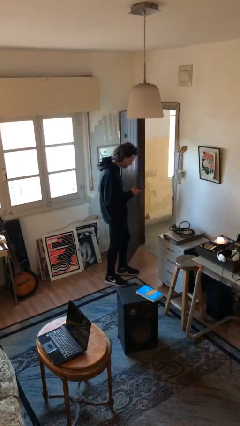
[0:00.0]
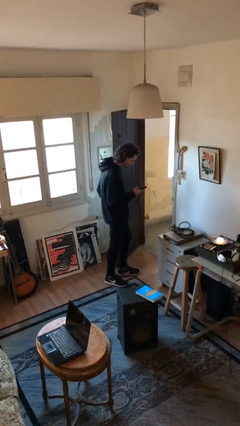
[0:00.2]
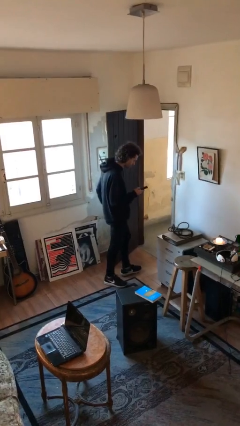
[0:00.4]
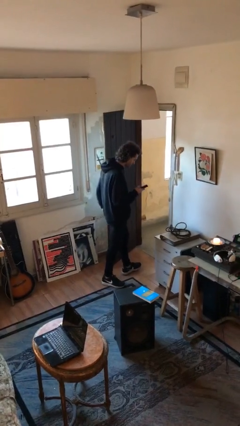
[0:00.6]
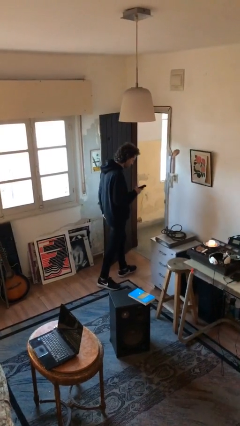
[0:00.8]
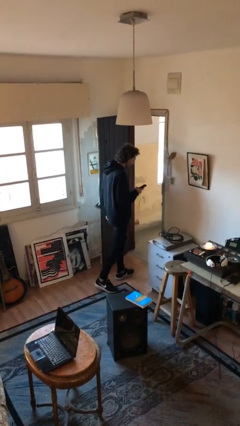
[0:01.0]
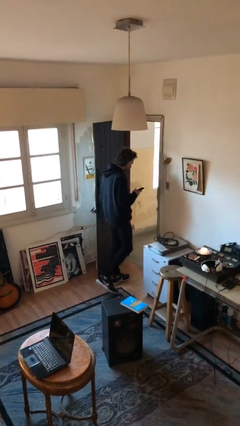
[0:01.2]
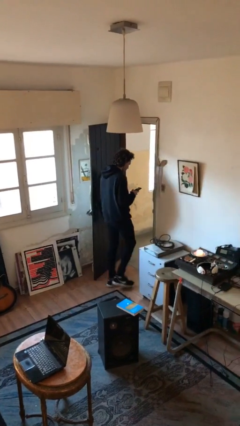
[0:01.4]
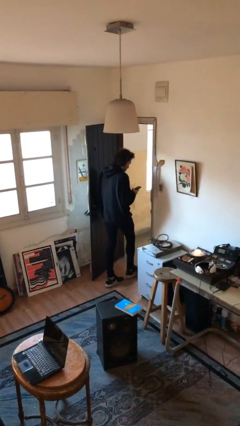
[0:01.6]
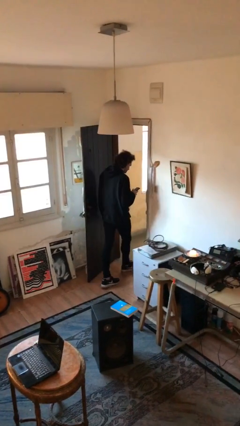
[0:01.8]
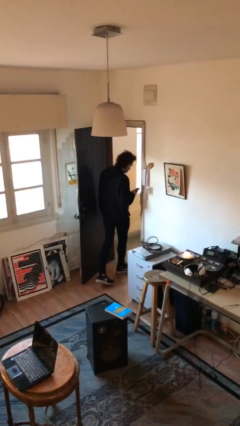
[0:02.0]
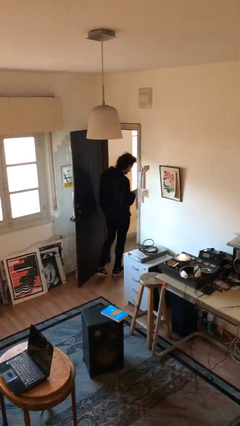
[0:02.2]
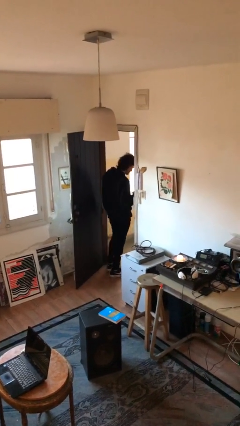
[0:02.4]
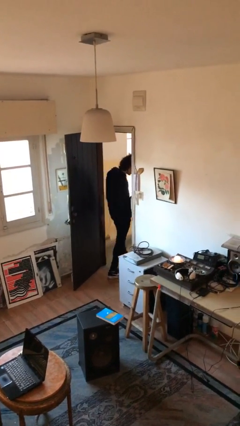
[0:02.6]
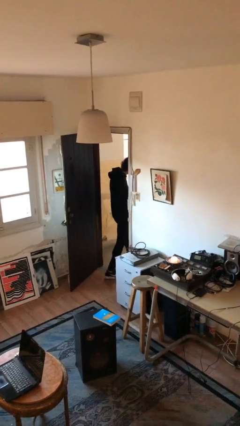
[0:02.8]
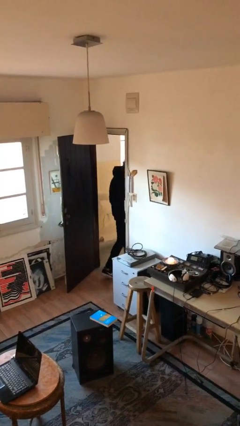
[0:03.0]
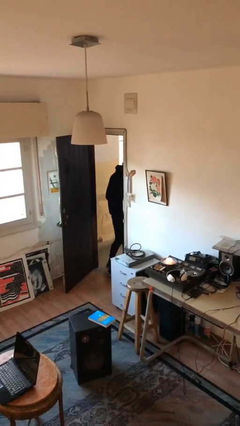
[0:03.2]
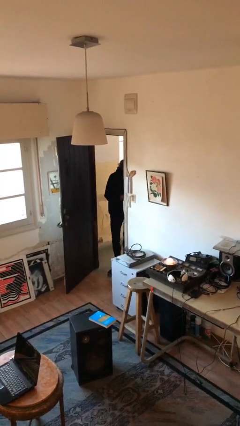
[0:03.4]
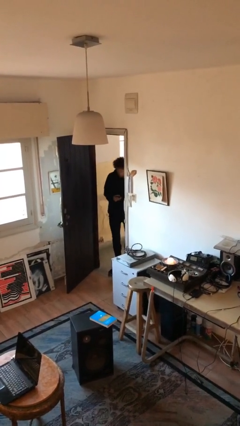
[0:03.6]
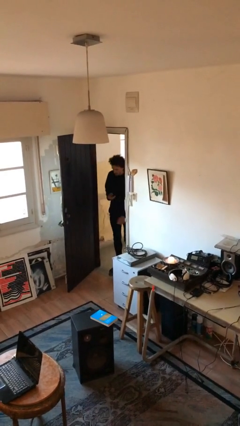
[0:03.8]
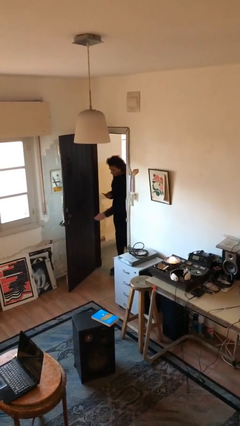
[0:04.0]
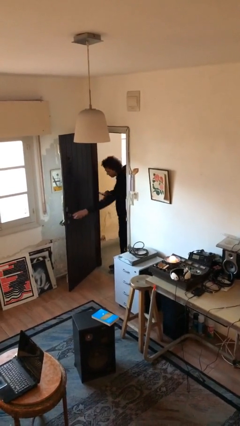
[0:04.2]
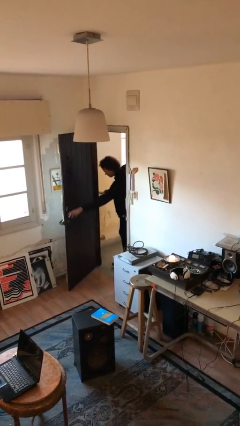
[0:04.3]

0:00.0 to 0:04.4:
person exits scene through structure

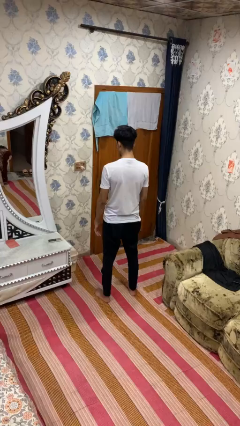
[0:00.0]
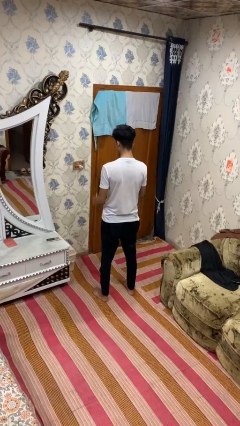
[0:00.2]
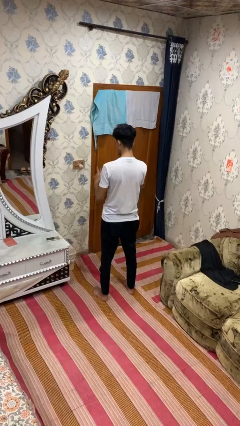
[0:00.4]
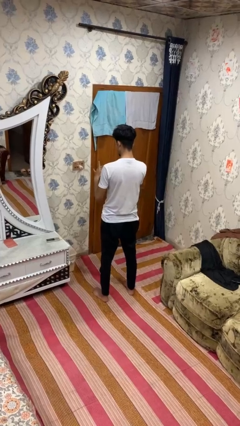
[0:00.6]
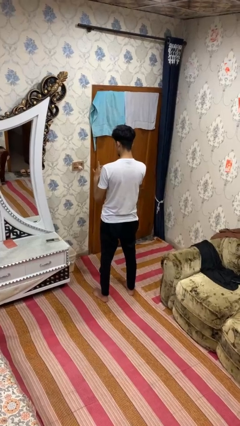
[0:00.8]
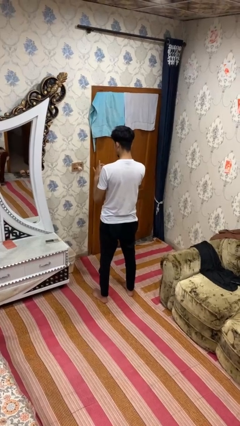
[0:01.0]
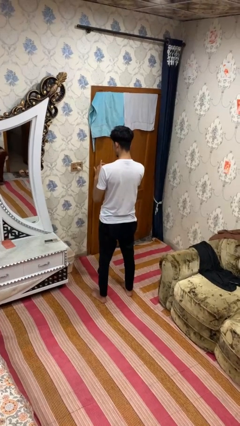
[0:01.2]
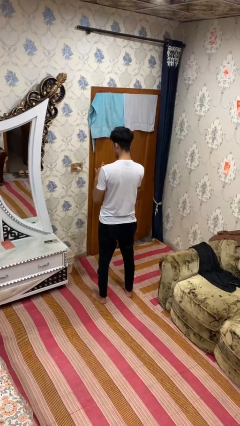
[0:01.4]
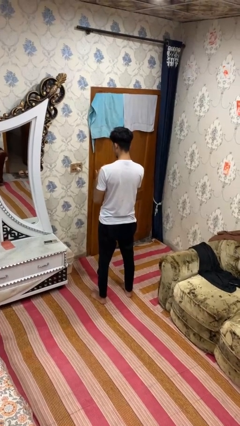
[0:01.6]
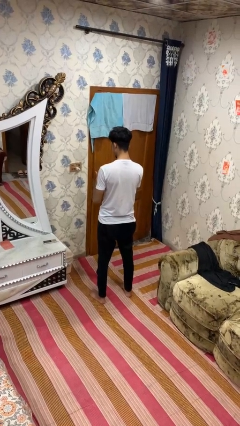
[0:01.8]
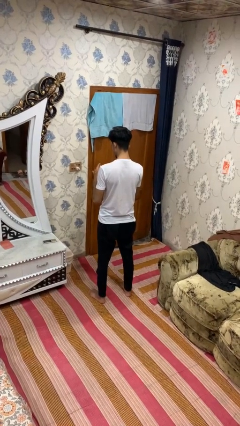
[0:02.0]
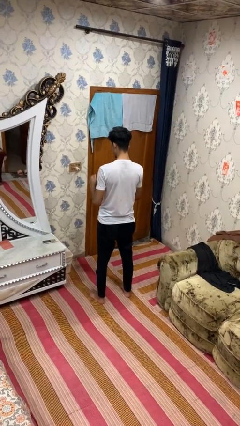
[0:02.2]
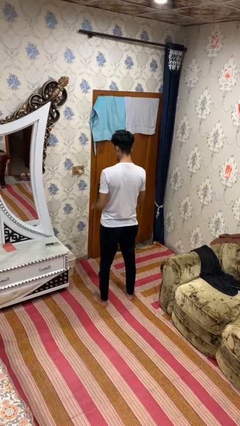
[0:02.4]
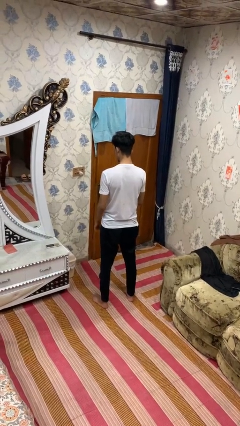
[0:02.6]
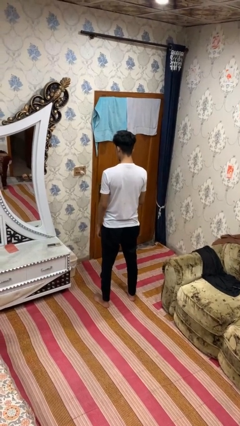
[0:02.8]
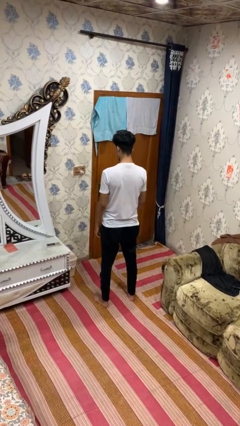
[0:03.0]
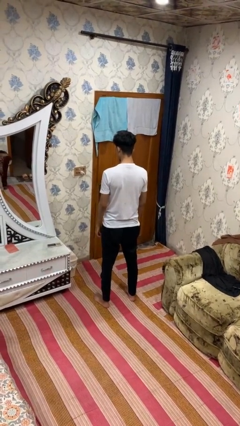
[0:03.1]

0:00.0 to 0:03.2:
person takes off ring

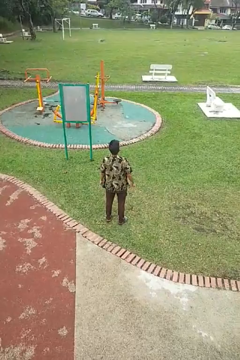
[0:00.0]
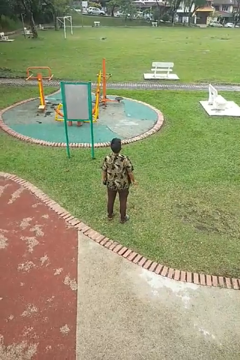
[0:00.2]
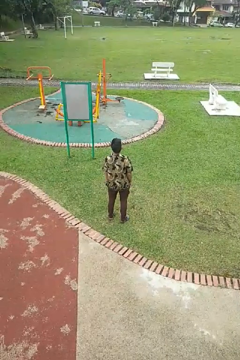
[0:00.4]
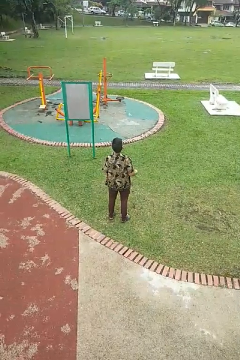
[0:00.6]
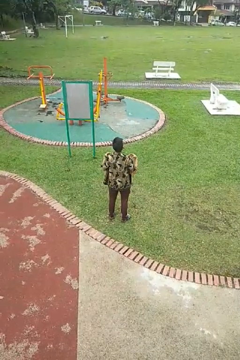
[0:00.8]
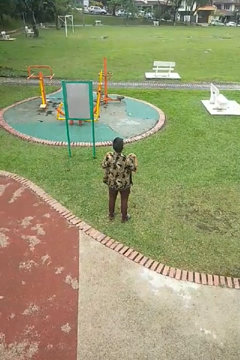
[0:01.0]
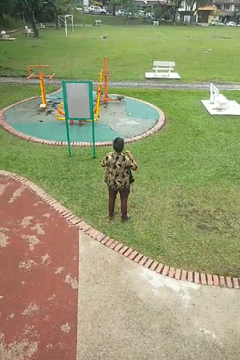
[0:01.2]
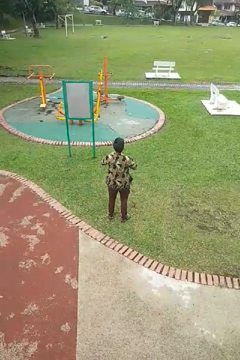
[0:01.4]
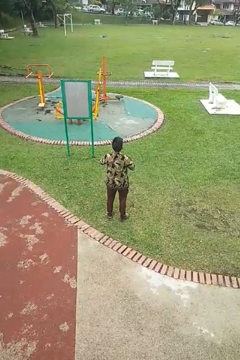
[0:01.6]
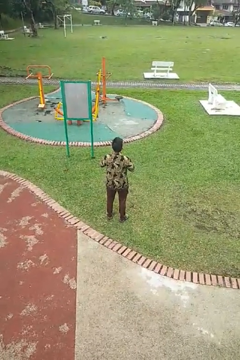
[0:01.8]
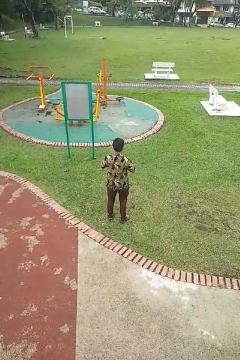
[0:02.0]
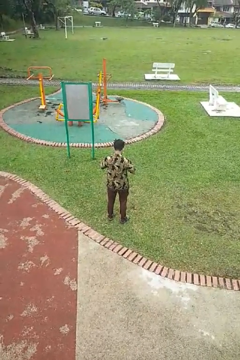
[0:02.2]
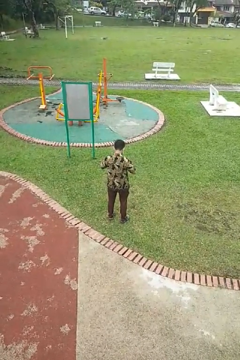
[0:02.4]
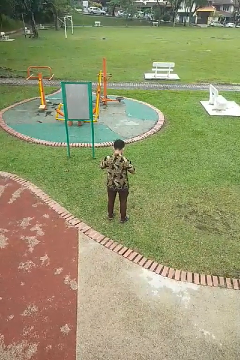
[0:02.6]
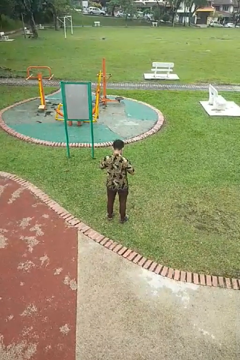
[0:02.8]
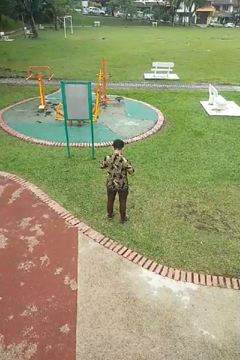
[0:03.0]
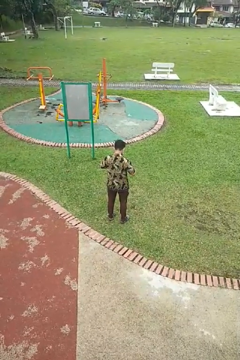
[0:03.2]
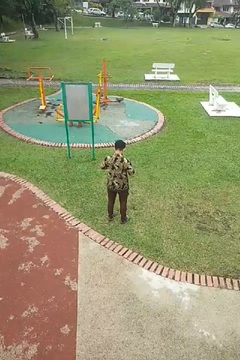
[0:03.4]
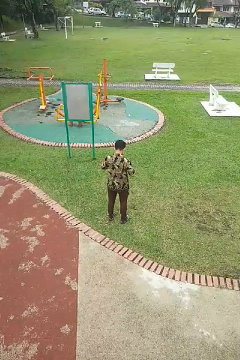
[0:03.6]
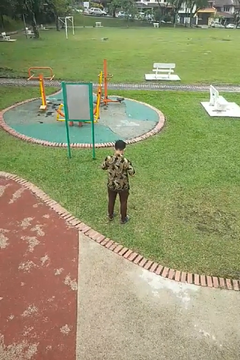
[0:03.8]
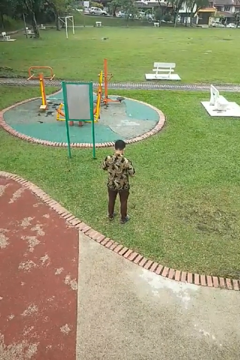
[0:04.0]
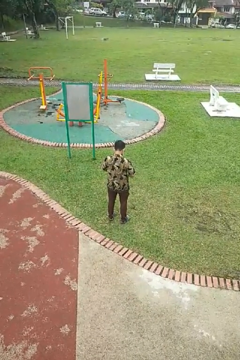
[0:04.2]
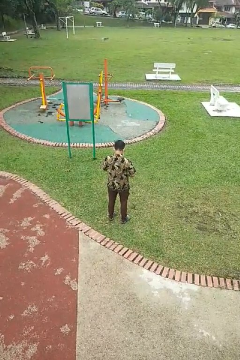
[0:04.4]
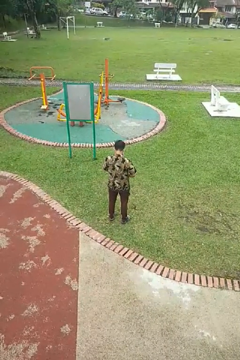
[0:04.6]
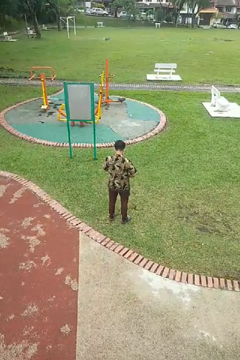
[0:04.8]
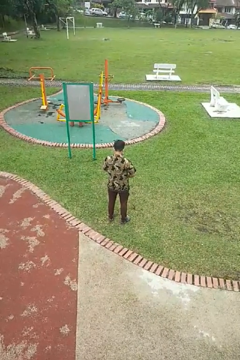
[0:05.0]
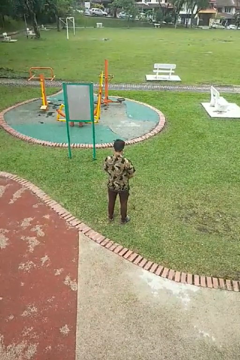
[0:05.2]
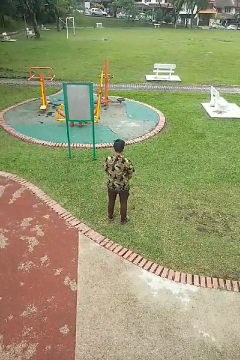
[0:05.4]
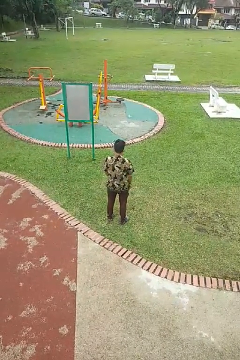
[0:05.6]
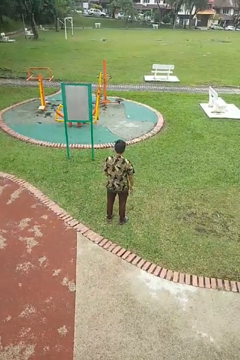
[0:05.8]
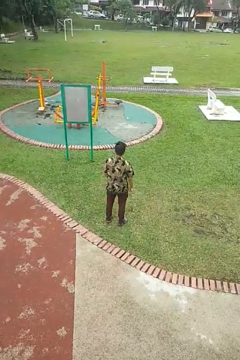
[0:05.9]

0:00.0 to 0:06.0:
person buttons shirt

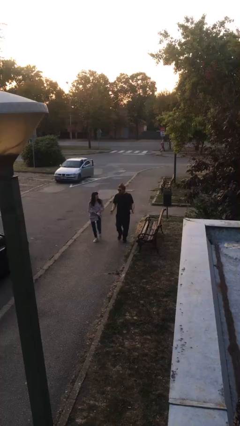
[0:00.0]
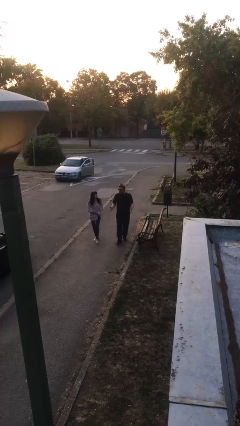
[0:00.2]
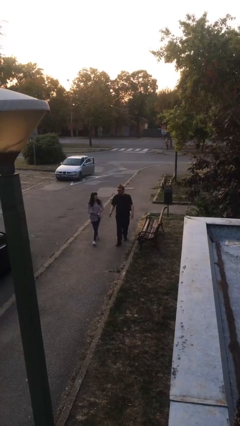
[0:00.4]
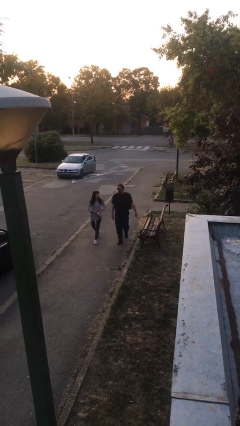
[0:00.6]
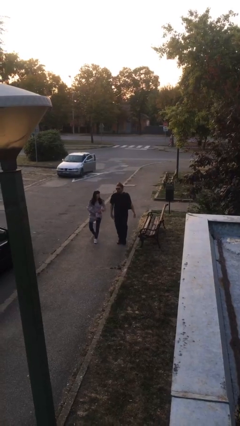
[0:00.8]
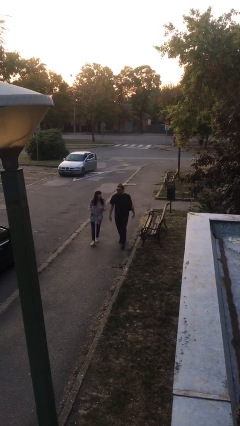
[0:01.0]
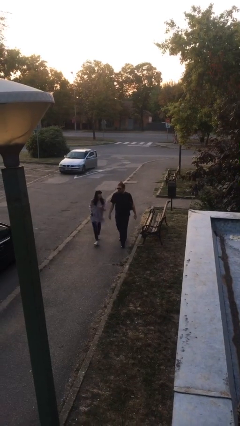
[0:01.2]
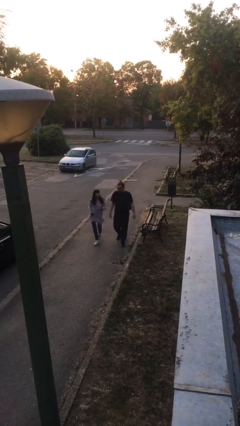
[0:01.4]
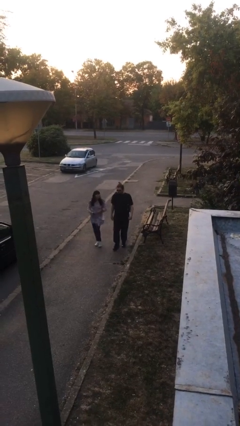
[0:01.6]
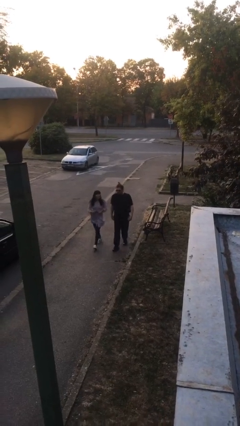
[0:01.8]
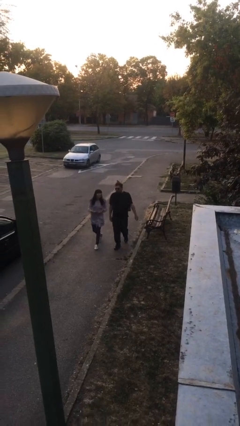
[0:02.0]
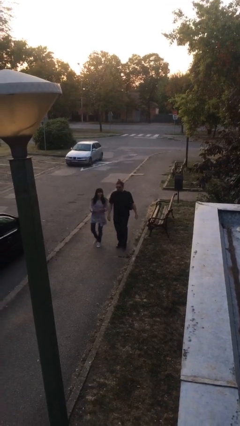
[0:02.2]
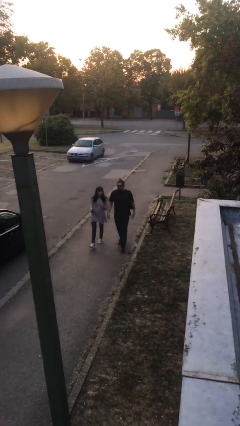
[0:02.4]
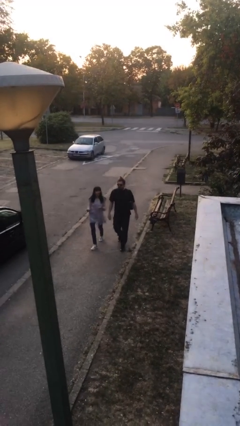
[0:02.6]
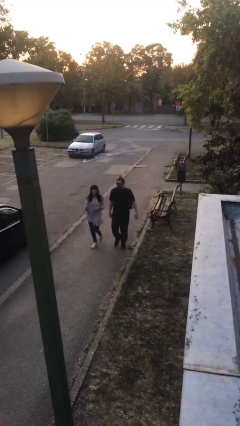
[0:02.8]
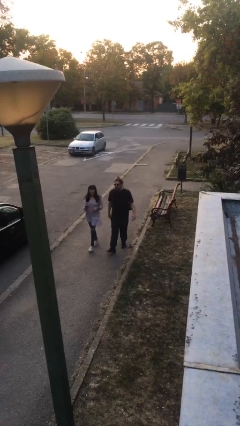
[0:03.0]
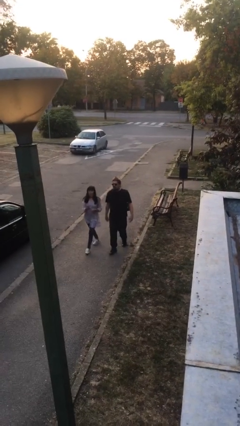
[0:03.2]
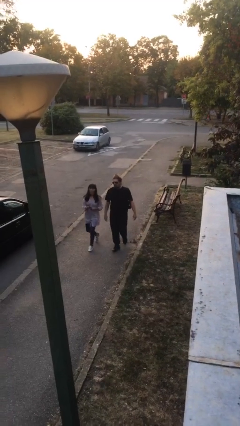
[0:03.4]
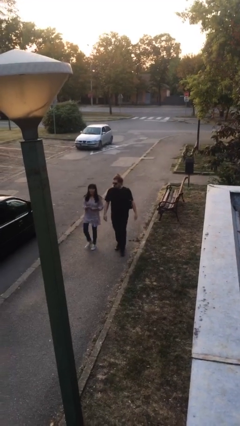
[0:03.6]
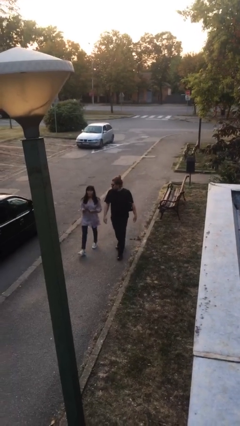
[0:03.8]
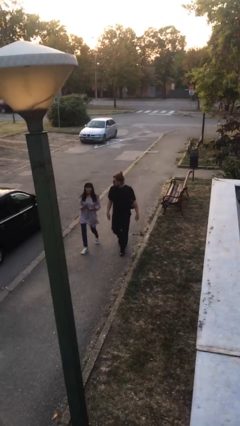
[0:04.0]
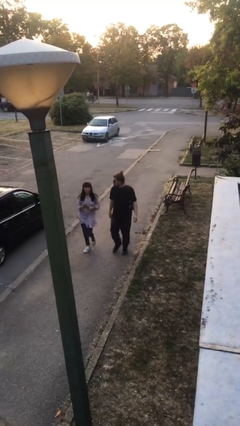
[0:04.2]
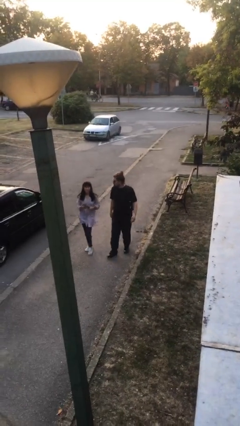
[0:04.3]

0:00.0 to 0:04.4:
person talks to person

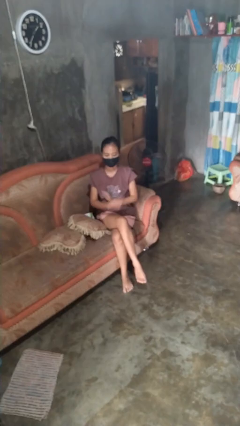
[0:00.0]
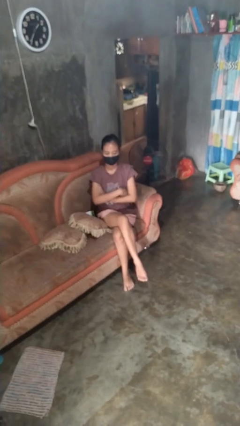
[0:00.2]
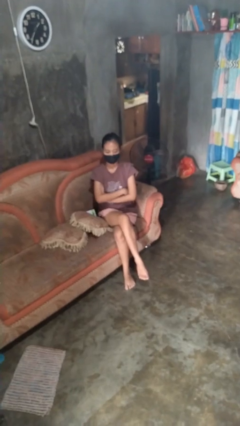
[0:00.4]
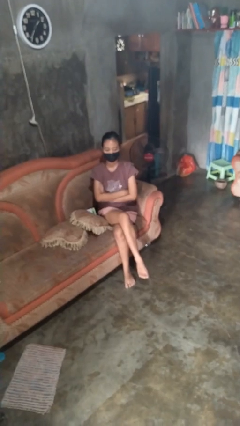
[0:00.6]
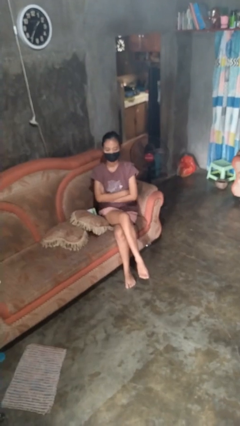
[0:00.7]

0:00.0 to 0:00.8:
person crosses arms
